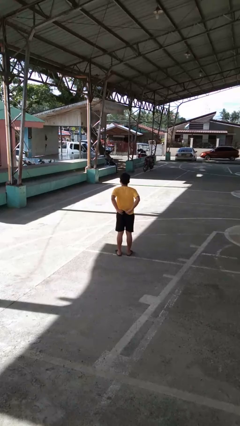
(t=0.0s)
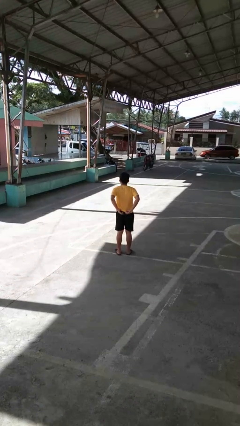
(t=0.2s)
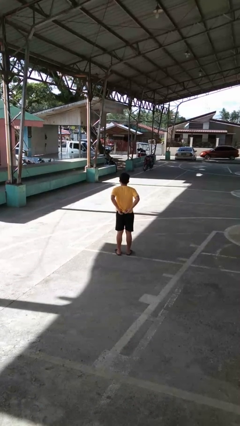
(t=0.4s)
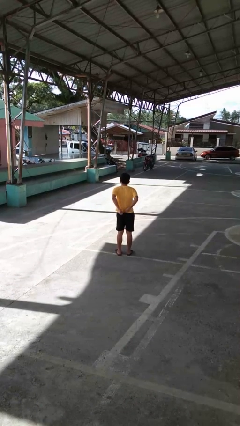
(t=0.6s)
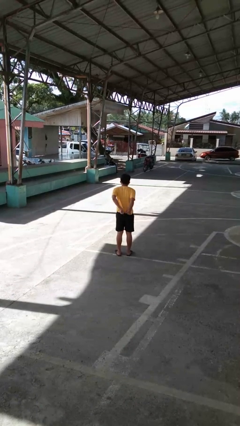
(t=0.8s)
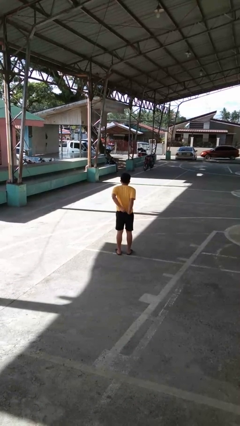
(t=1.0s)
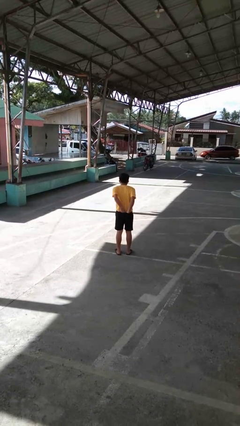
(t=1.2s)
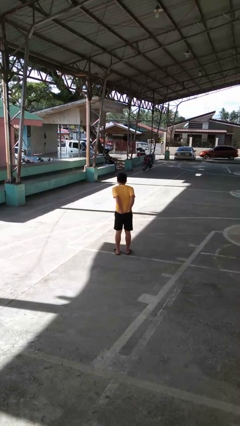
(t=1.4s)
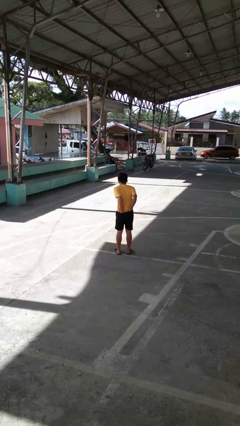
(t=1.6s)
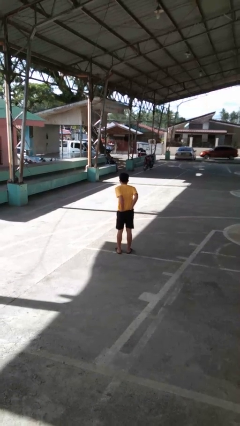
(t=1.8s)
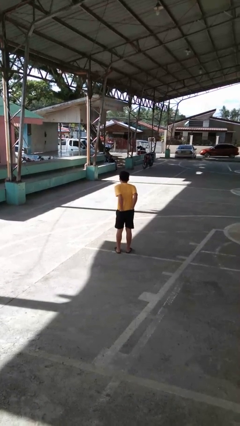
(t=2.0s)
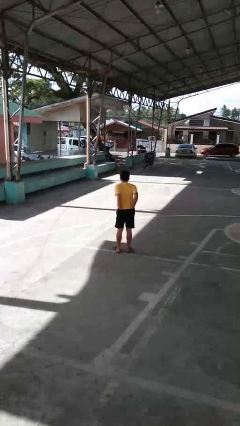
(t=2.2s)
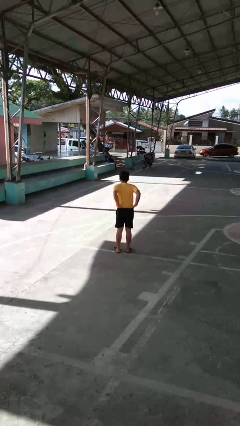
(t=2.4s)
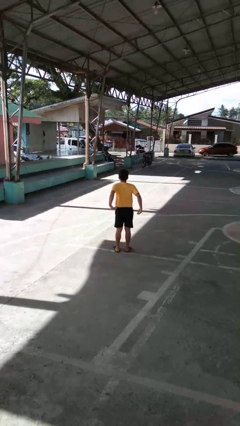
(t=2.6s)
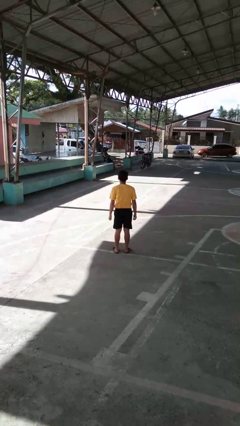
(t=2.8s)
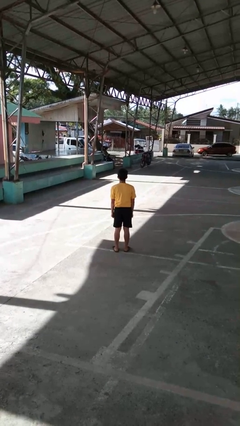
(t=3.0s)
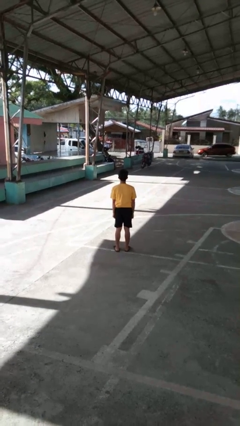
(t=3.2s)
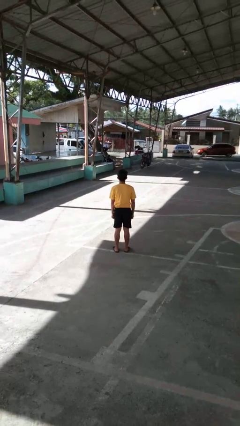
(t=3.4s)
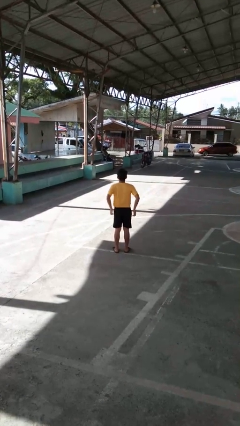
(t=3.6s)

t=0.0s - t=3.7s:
person tucks in shirt

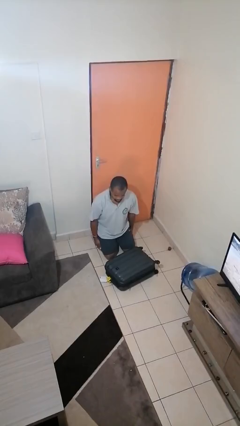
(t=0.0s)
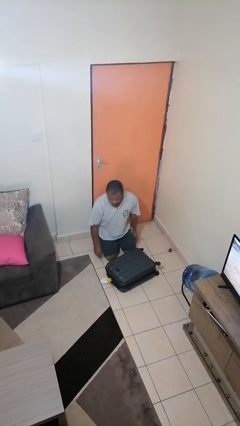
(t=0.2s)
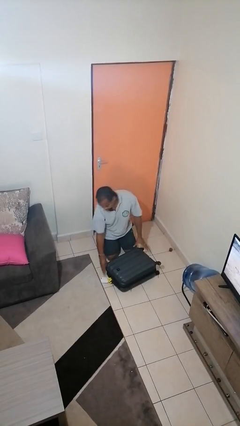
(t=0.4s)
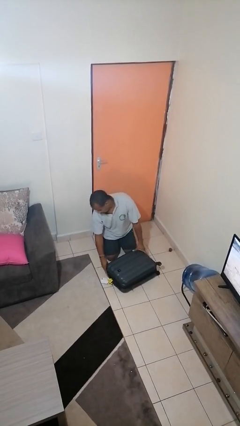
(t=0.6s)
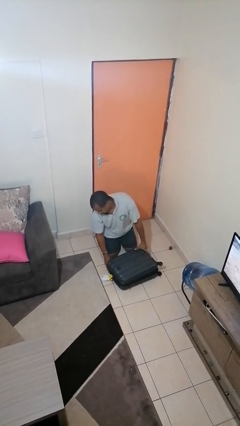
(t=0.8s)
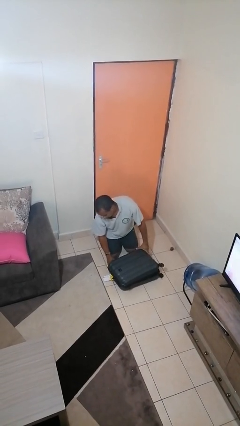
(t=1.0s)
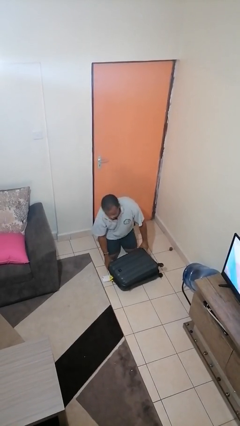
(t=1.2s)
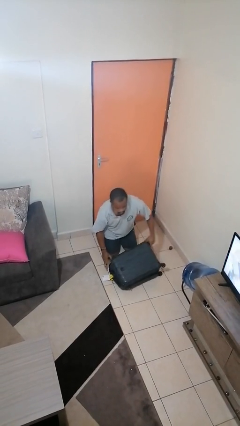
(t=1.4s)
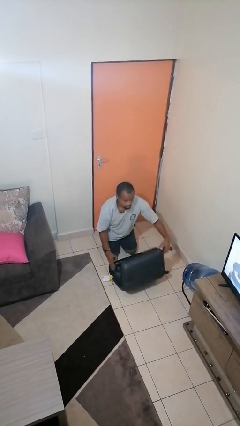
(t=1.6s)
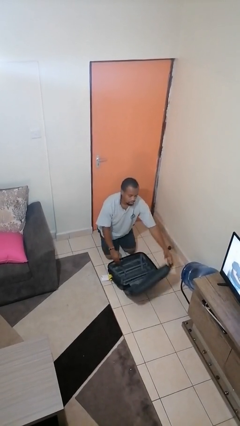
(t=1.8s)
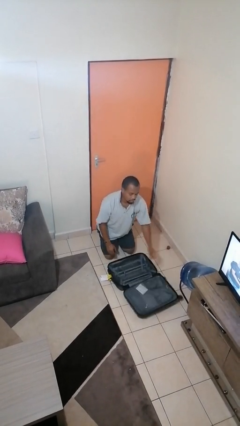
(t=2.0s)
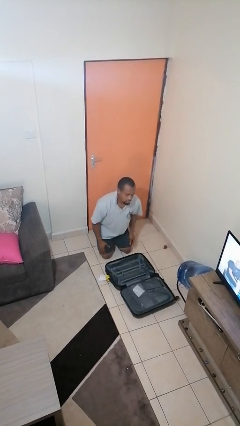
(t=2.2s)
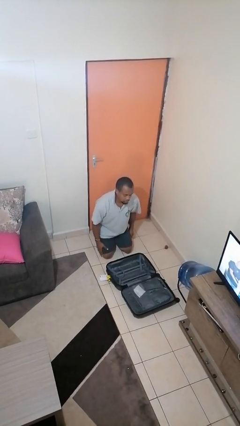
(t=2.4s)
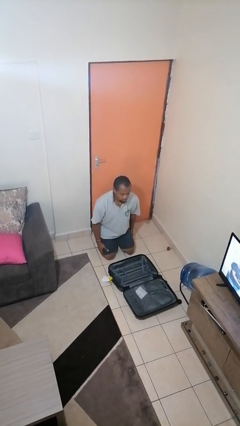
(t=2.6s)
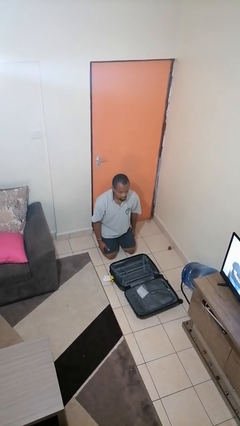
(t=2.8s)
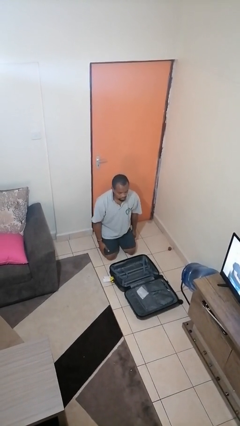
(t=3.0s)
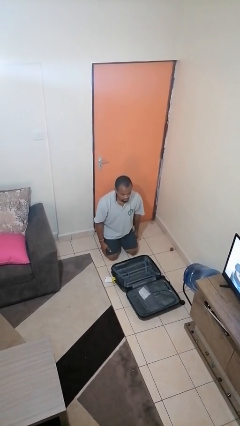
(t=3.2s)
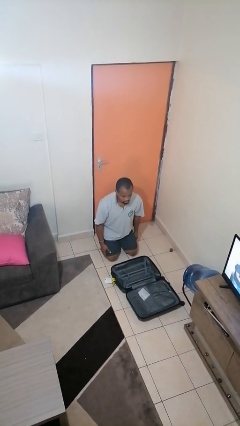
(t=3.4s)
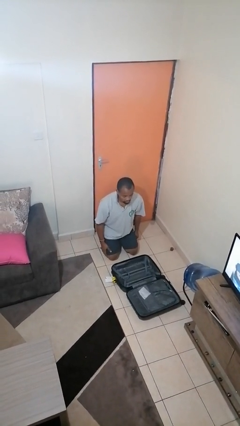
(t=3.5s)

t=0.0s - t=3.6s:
person opens suitcase

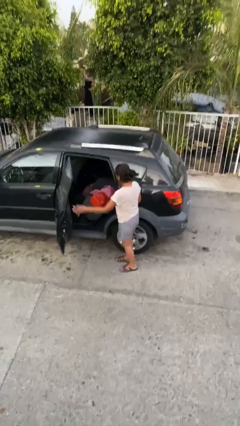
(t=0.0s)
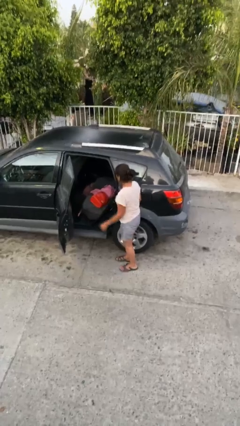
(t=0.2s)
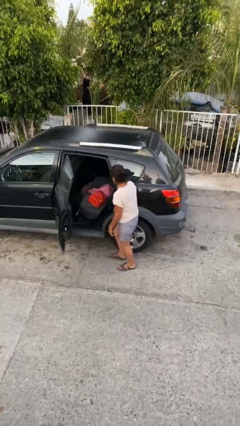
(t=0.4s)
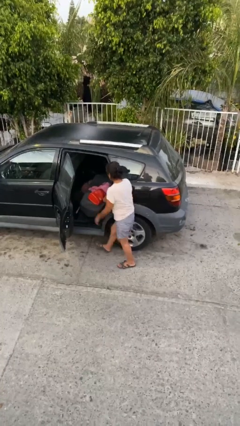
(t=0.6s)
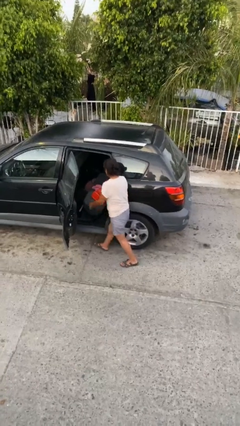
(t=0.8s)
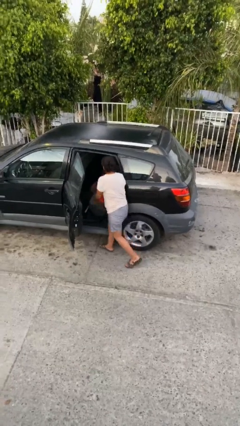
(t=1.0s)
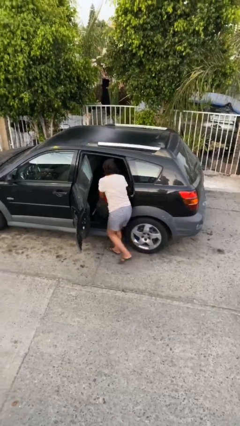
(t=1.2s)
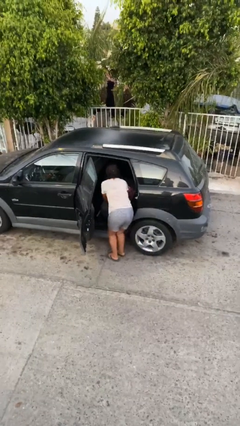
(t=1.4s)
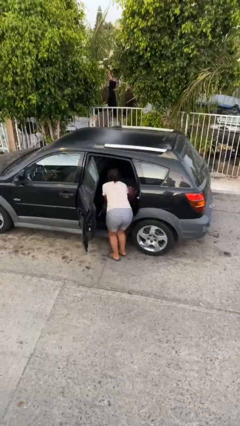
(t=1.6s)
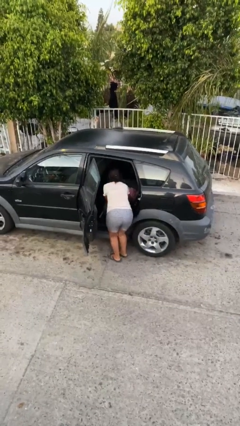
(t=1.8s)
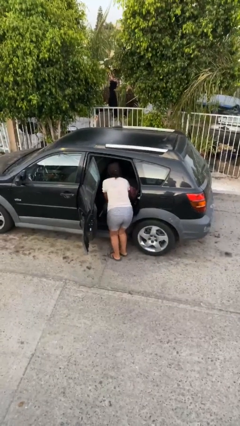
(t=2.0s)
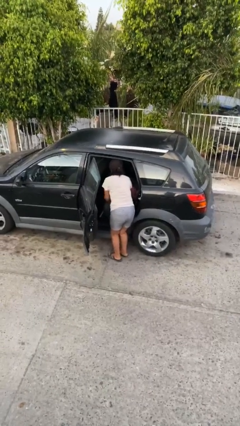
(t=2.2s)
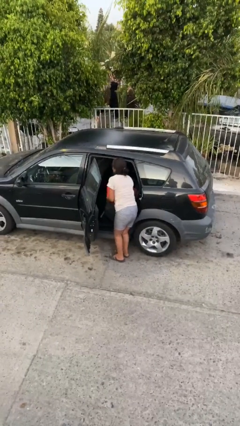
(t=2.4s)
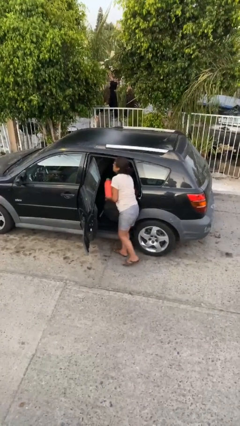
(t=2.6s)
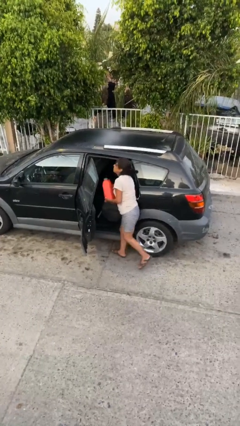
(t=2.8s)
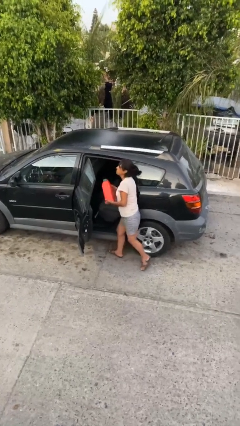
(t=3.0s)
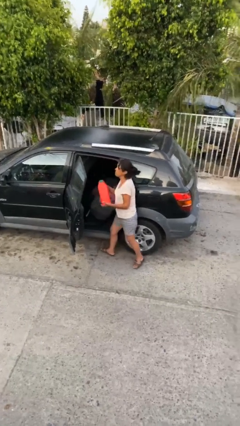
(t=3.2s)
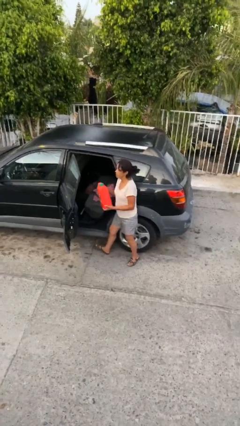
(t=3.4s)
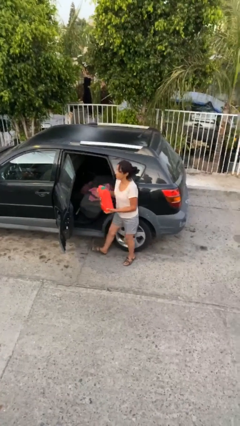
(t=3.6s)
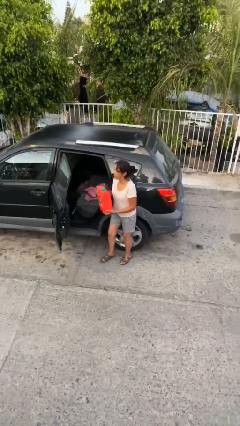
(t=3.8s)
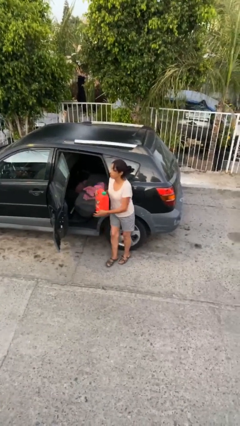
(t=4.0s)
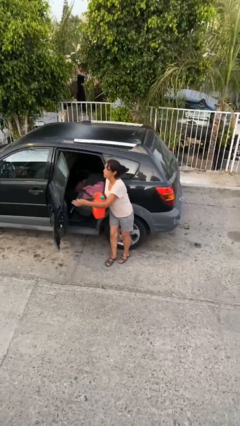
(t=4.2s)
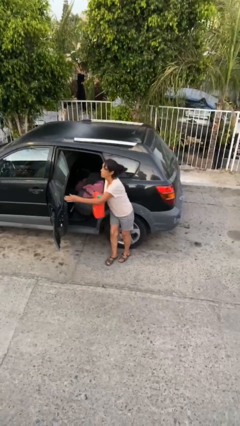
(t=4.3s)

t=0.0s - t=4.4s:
person unloads car

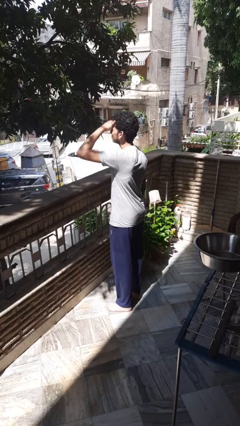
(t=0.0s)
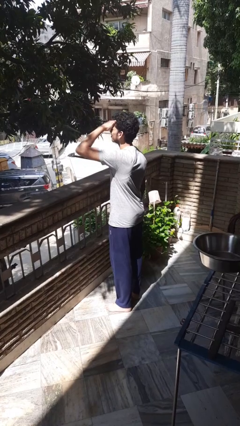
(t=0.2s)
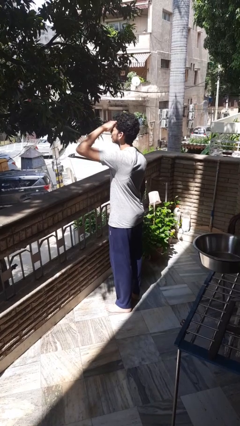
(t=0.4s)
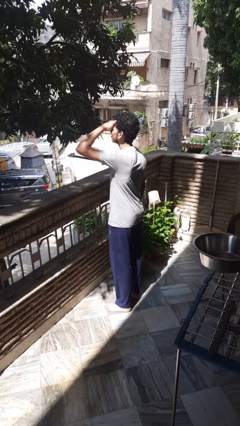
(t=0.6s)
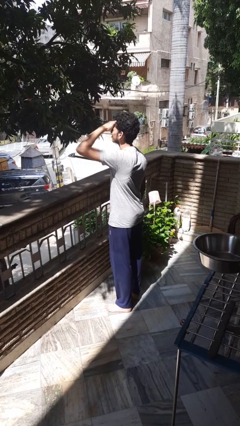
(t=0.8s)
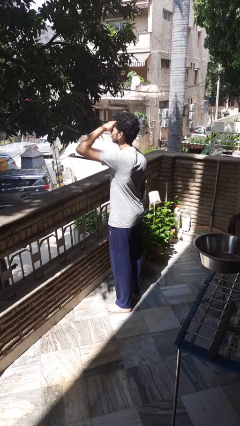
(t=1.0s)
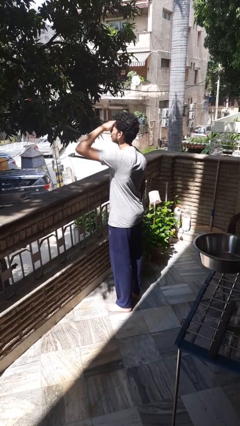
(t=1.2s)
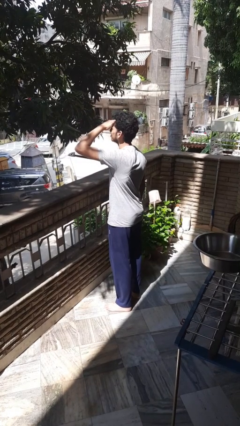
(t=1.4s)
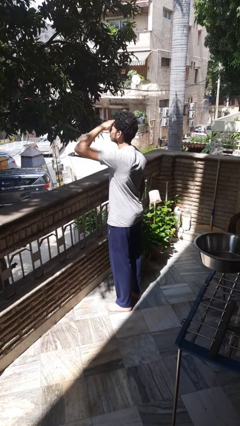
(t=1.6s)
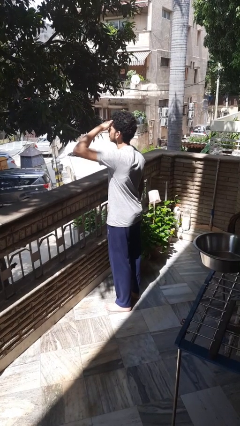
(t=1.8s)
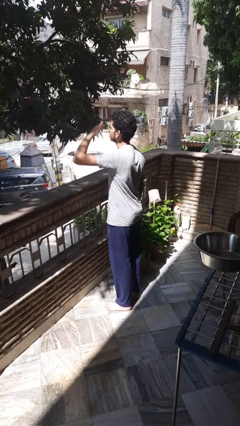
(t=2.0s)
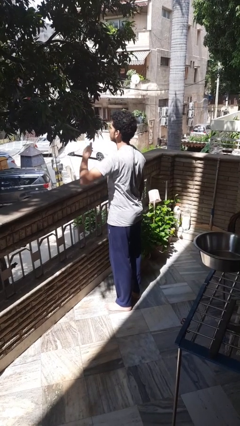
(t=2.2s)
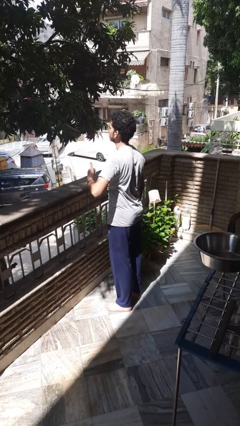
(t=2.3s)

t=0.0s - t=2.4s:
person shades eyes

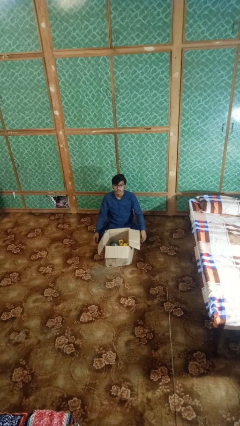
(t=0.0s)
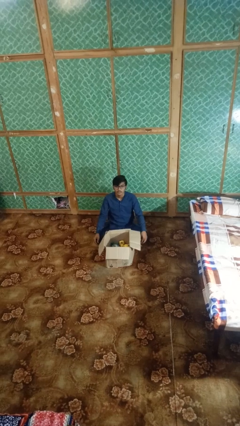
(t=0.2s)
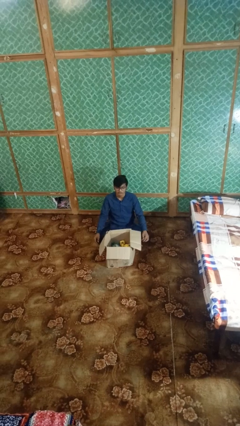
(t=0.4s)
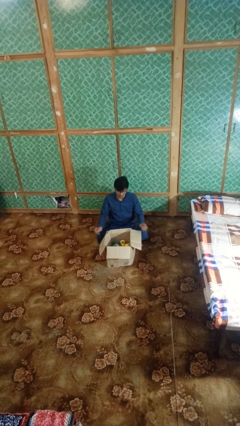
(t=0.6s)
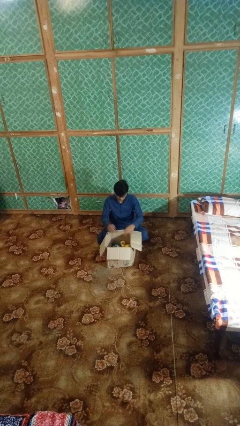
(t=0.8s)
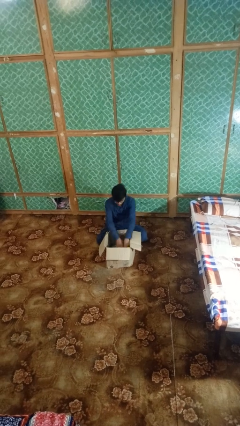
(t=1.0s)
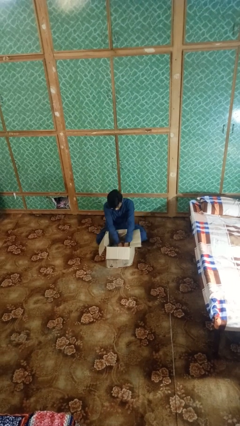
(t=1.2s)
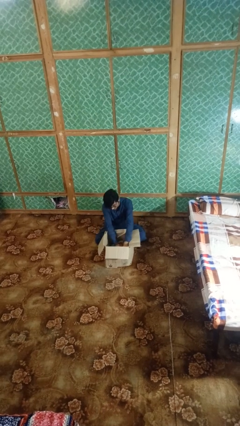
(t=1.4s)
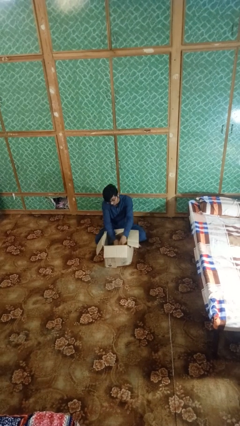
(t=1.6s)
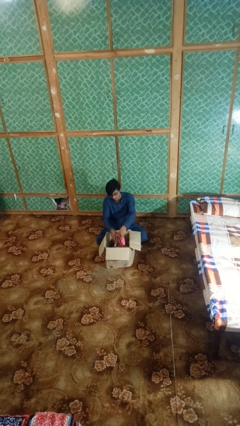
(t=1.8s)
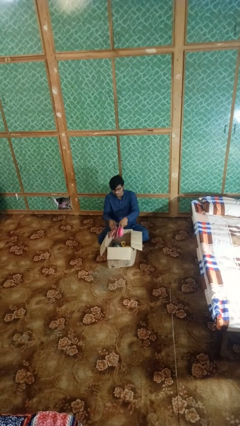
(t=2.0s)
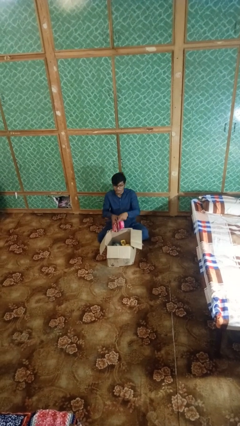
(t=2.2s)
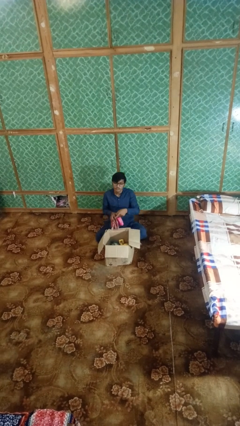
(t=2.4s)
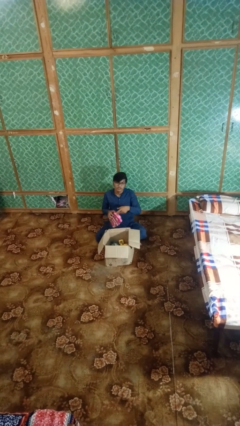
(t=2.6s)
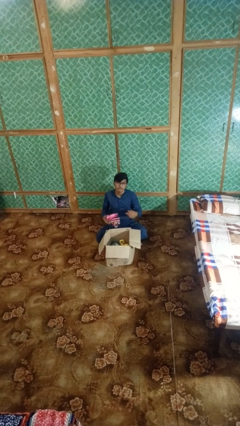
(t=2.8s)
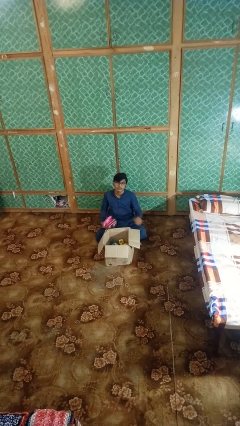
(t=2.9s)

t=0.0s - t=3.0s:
person takes object from box

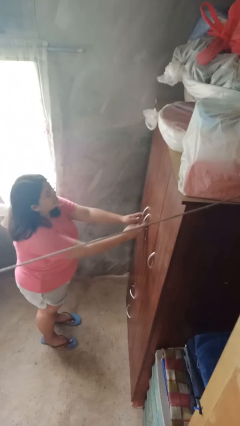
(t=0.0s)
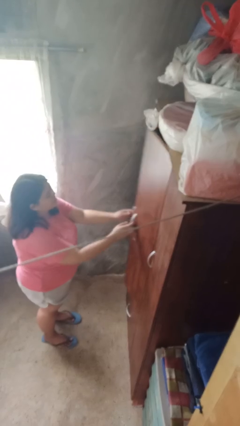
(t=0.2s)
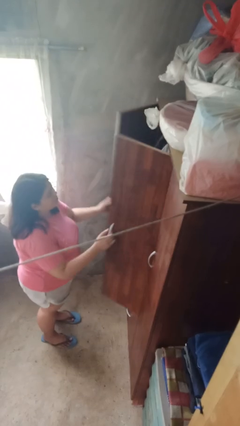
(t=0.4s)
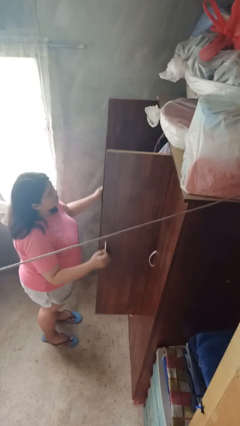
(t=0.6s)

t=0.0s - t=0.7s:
person opens closet door
